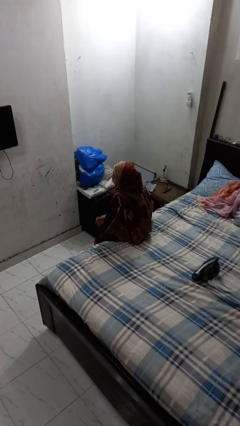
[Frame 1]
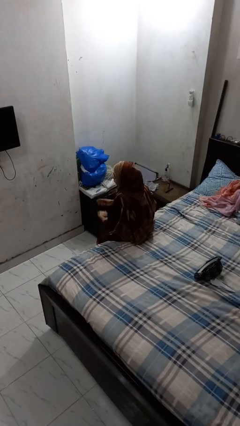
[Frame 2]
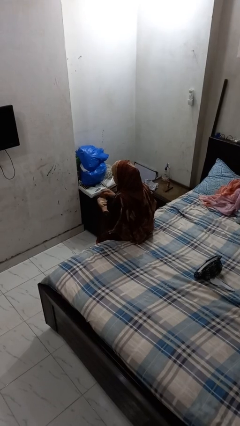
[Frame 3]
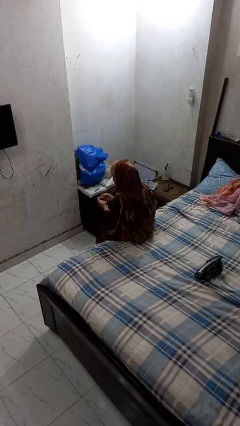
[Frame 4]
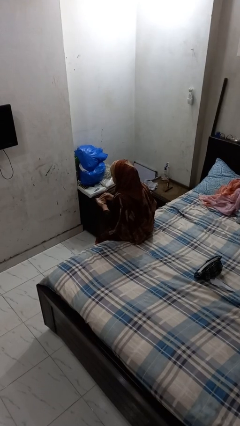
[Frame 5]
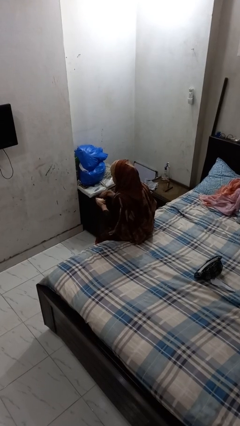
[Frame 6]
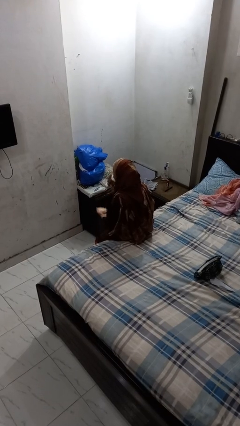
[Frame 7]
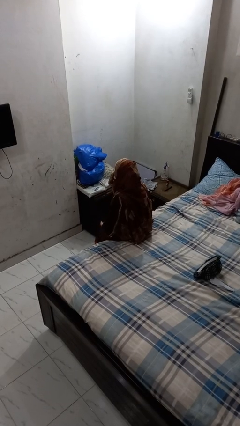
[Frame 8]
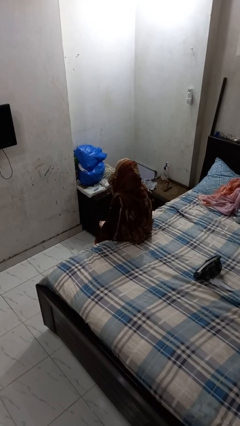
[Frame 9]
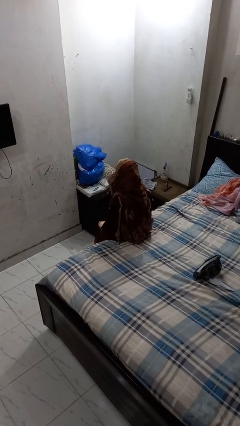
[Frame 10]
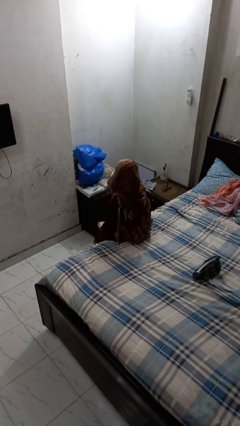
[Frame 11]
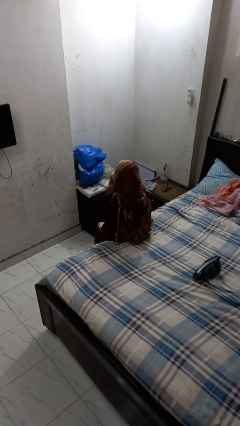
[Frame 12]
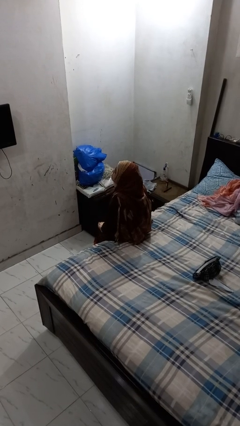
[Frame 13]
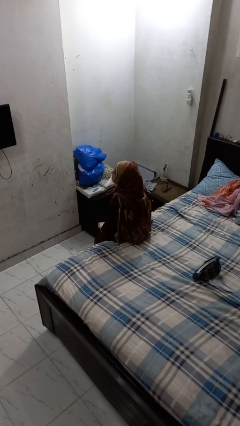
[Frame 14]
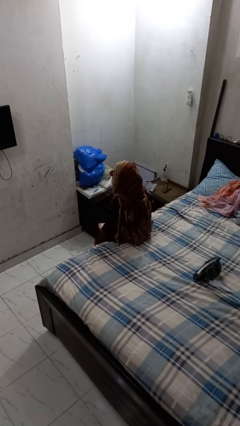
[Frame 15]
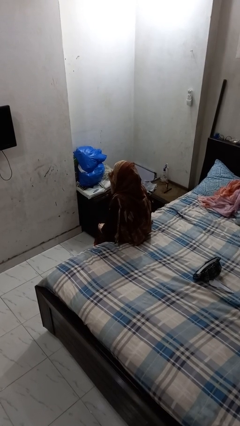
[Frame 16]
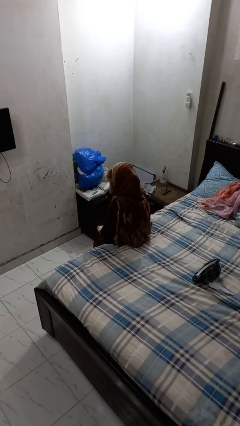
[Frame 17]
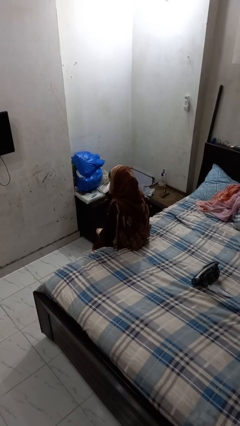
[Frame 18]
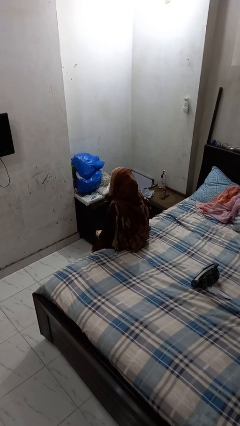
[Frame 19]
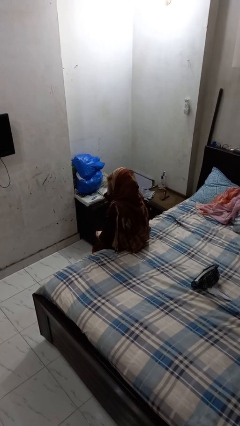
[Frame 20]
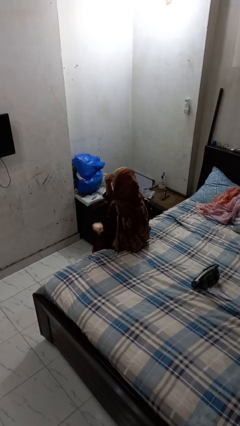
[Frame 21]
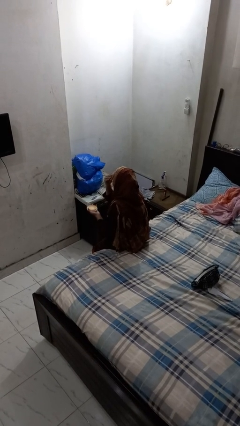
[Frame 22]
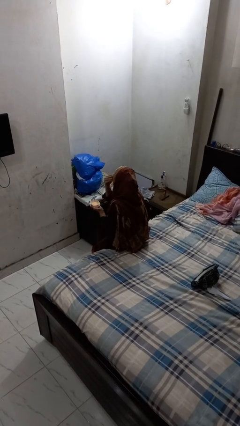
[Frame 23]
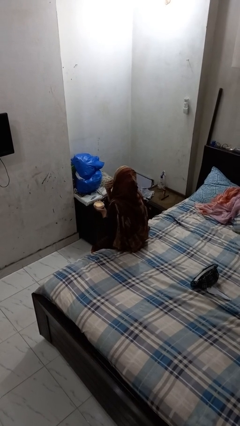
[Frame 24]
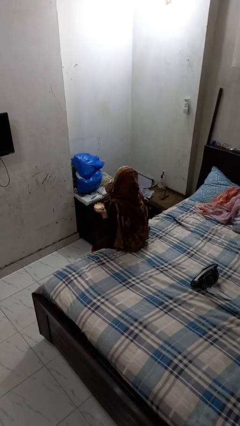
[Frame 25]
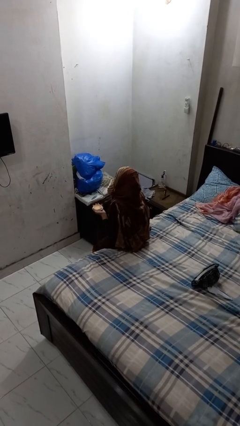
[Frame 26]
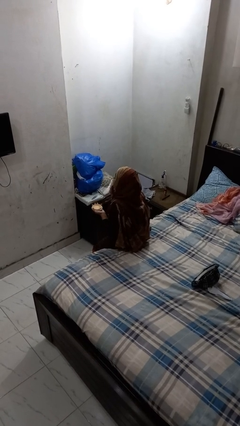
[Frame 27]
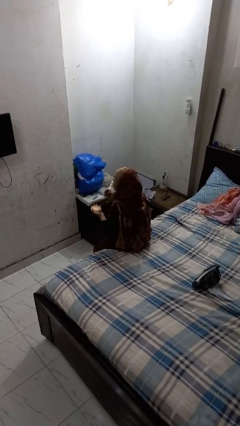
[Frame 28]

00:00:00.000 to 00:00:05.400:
person applies foundation makeup

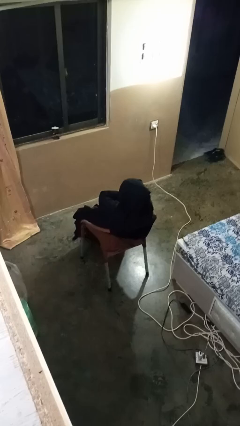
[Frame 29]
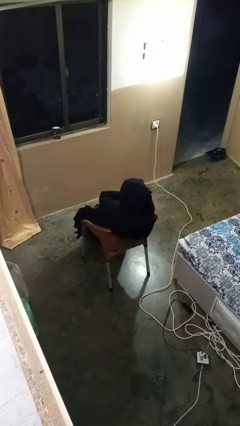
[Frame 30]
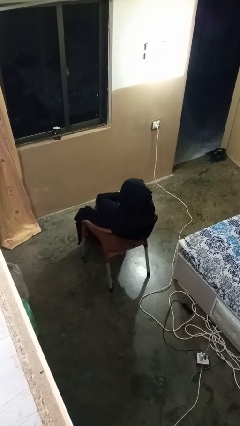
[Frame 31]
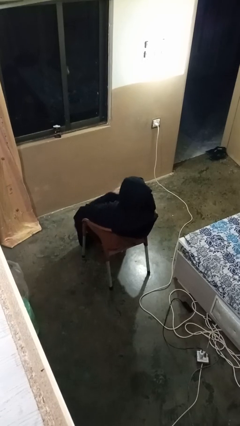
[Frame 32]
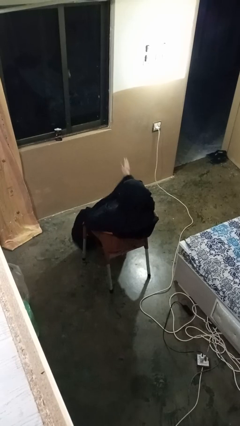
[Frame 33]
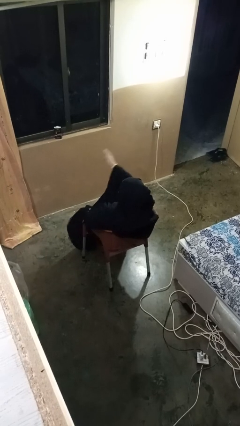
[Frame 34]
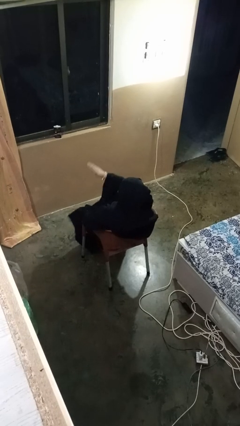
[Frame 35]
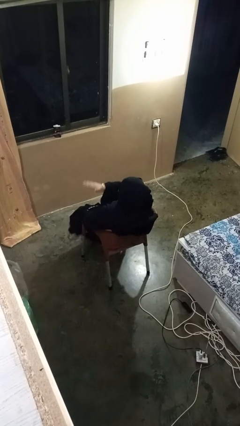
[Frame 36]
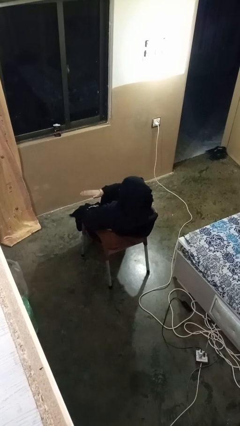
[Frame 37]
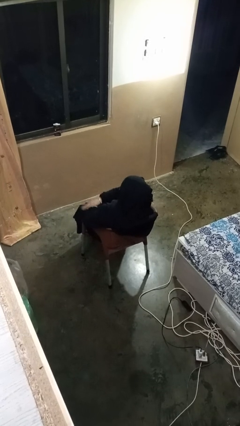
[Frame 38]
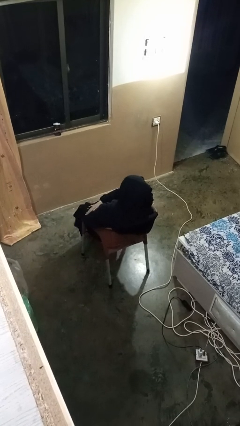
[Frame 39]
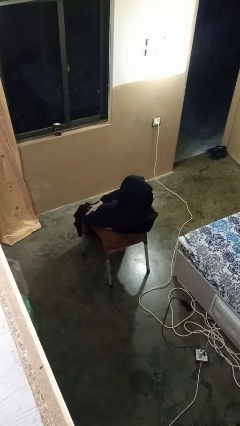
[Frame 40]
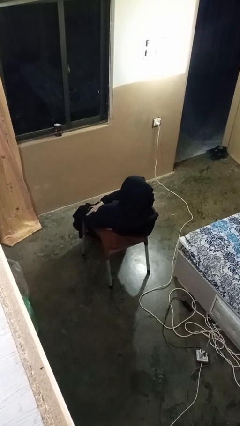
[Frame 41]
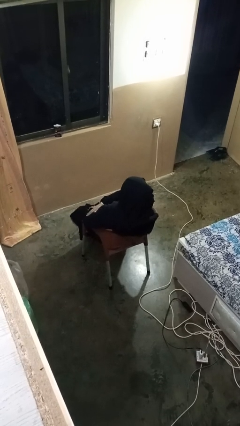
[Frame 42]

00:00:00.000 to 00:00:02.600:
person gestures swipe left

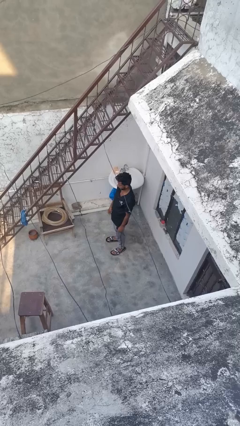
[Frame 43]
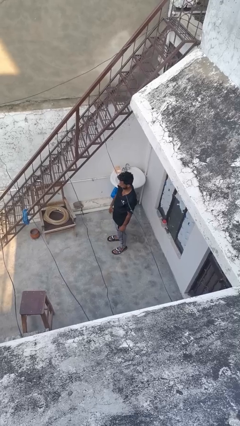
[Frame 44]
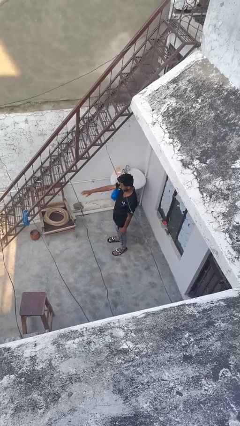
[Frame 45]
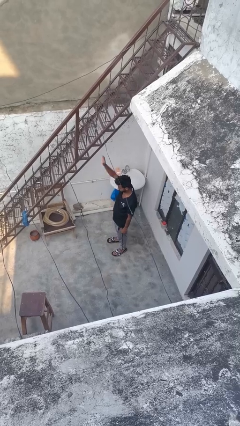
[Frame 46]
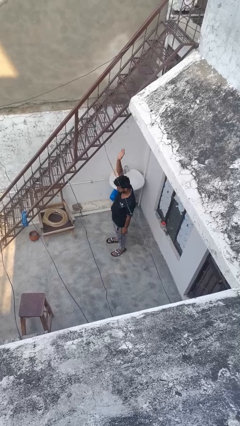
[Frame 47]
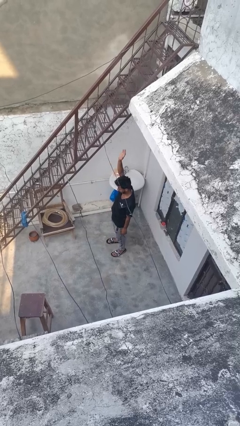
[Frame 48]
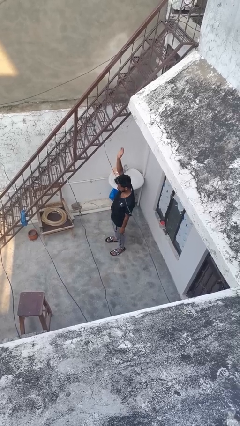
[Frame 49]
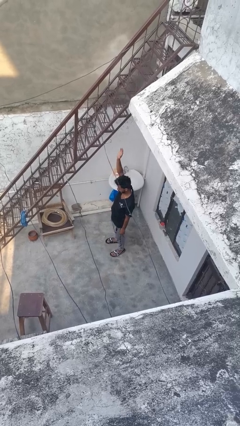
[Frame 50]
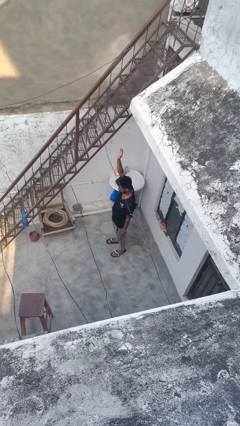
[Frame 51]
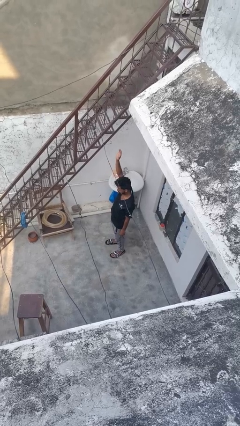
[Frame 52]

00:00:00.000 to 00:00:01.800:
person gestures swipe up

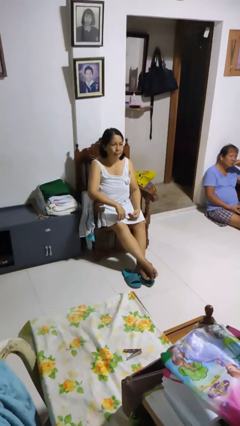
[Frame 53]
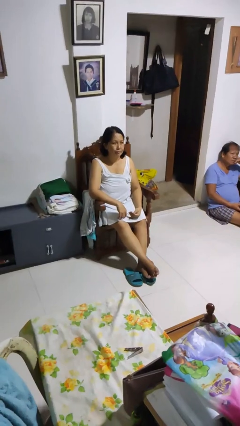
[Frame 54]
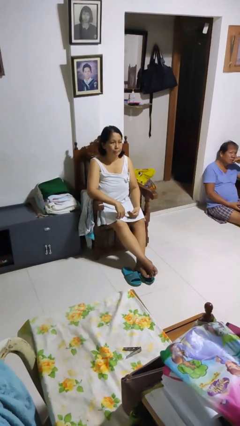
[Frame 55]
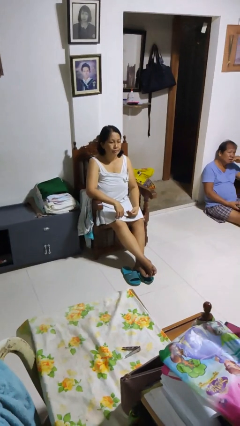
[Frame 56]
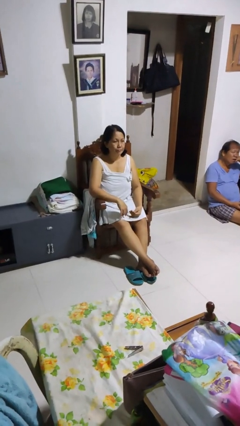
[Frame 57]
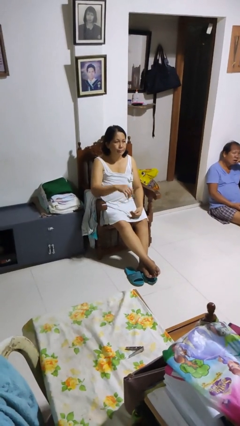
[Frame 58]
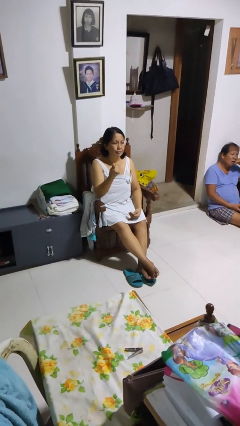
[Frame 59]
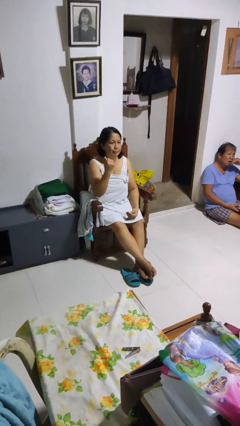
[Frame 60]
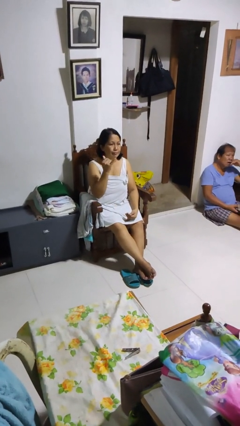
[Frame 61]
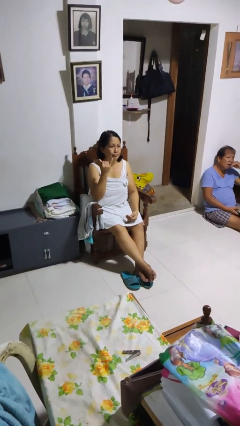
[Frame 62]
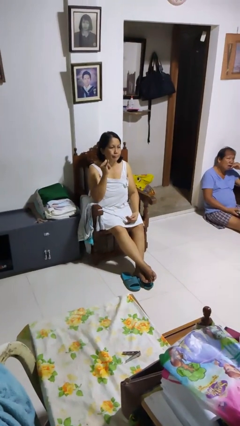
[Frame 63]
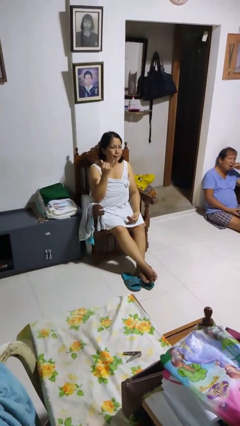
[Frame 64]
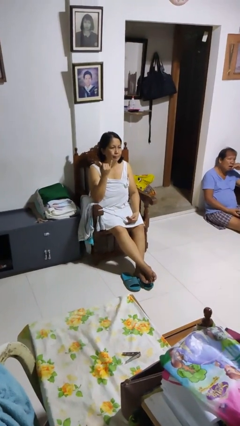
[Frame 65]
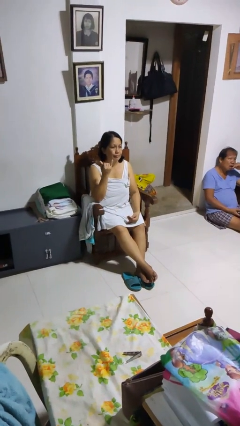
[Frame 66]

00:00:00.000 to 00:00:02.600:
person gestures hang loose

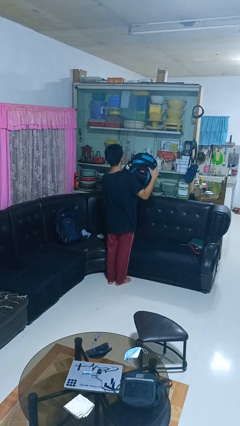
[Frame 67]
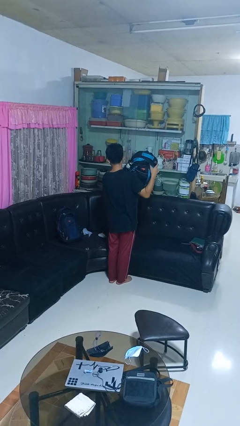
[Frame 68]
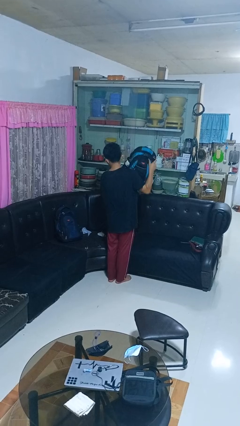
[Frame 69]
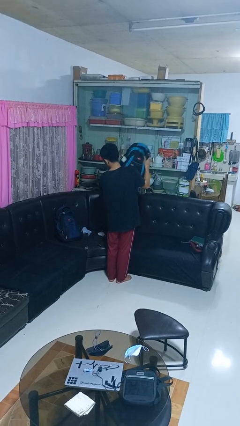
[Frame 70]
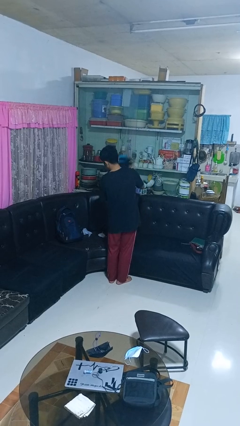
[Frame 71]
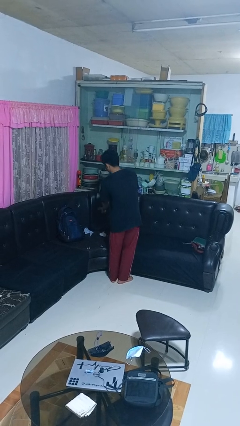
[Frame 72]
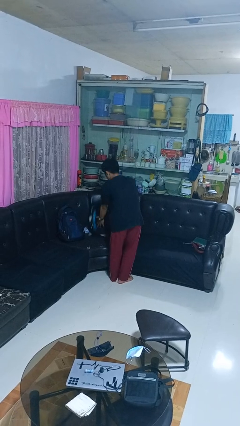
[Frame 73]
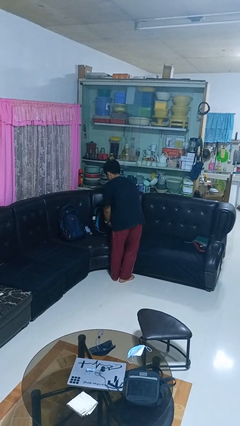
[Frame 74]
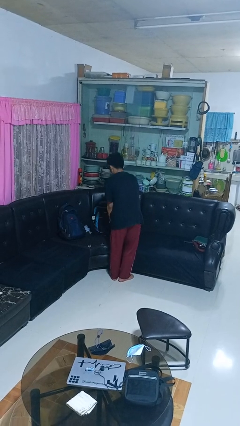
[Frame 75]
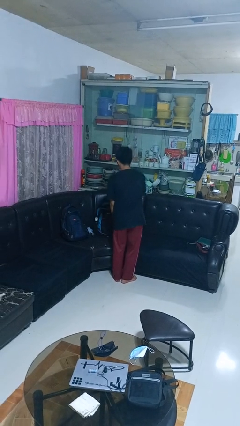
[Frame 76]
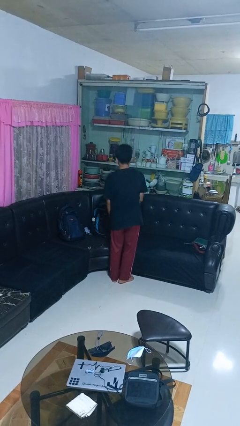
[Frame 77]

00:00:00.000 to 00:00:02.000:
person puts down object on couch

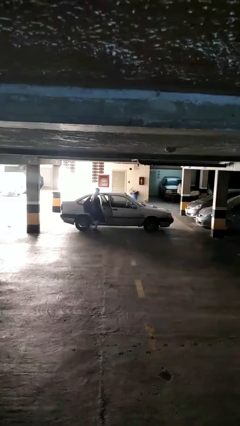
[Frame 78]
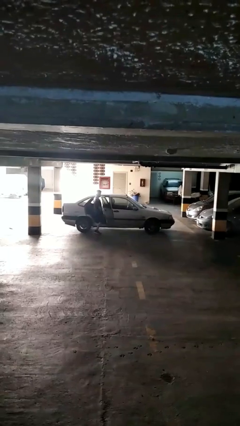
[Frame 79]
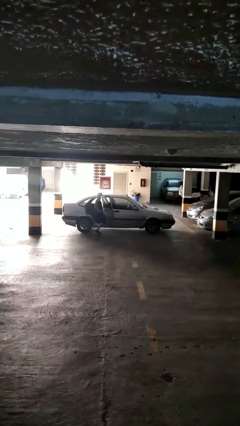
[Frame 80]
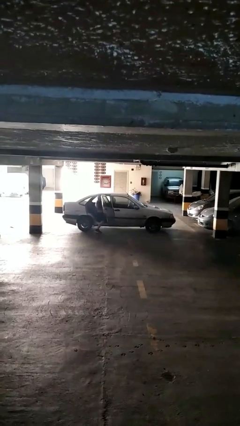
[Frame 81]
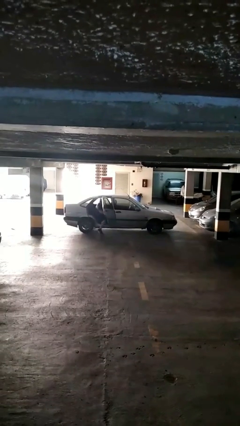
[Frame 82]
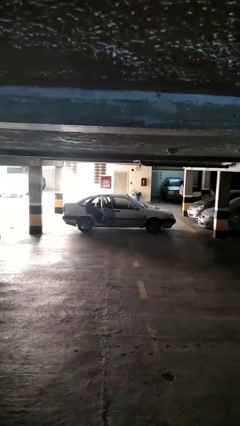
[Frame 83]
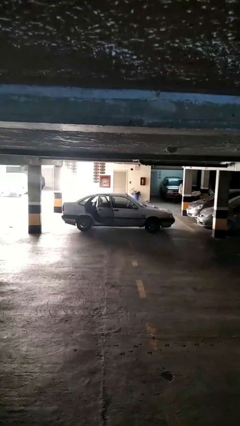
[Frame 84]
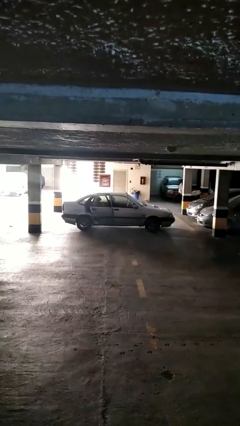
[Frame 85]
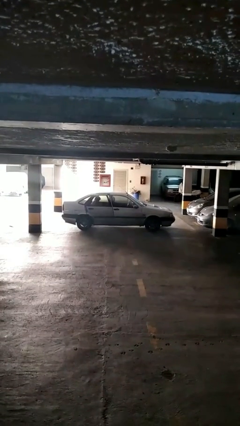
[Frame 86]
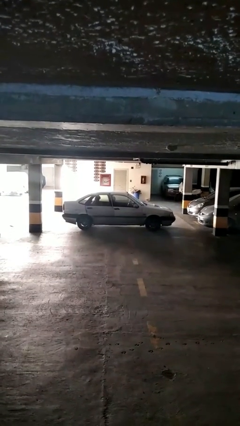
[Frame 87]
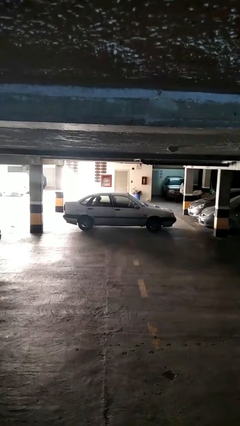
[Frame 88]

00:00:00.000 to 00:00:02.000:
car picks up person

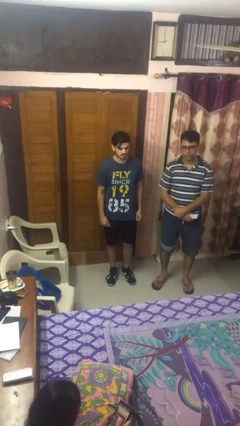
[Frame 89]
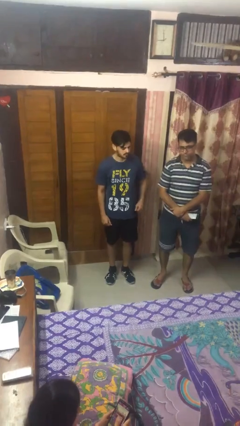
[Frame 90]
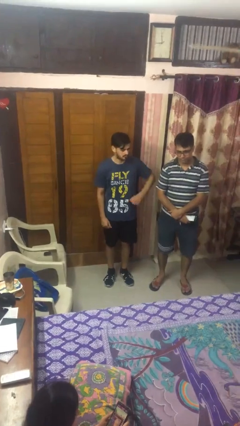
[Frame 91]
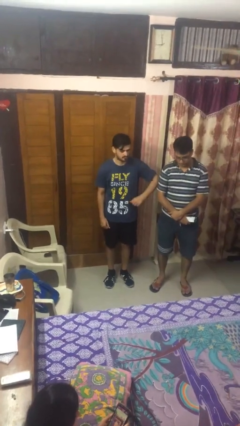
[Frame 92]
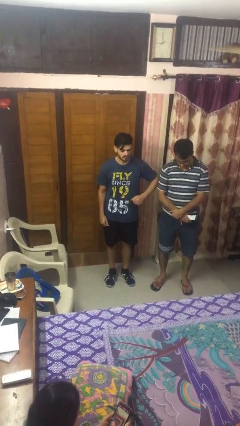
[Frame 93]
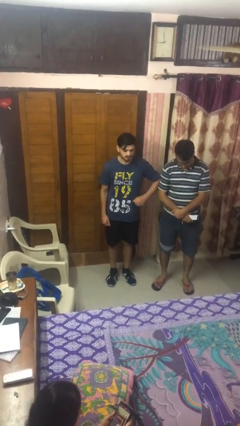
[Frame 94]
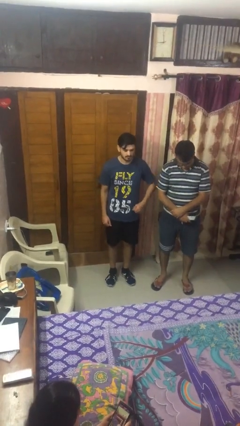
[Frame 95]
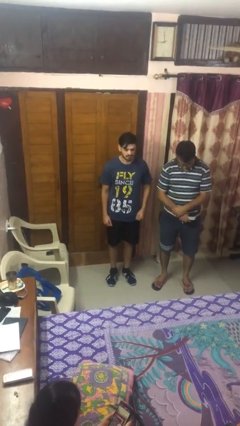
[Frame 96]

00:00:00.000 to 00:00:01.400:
person nudges person with elbow
